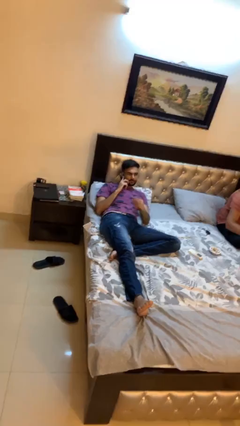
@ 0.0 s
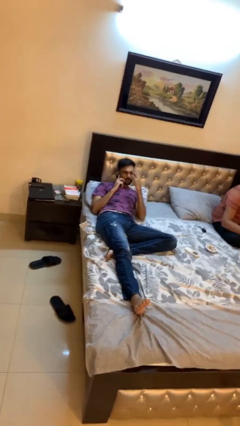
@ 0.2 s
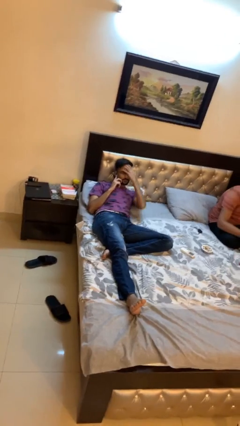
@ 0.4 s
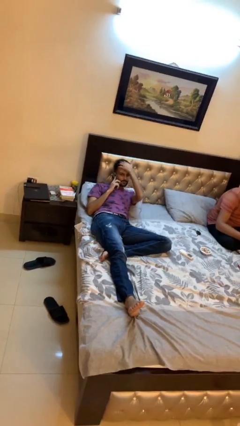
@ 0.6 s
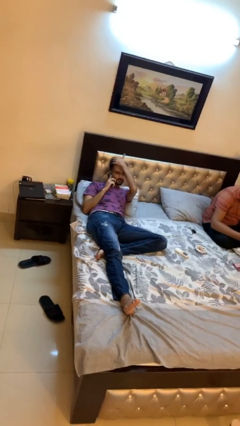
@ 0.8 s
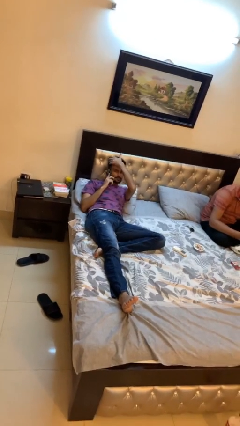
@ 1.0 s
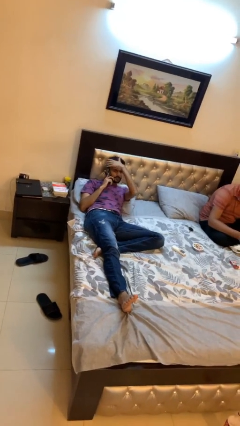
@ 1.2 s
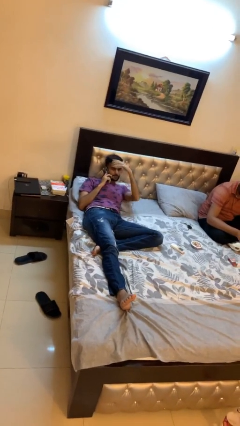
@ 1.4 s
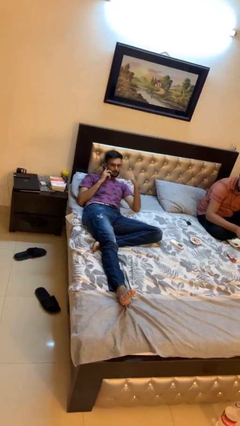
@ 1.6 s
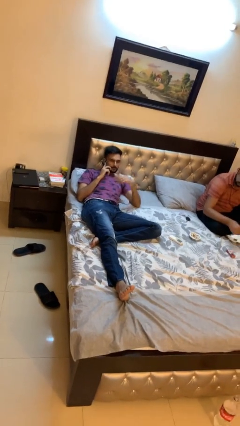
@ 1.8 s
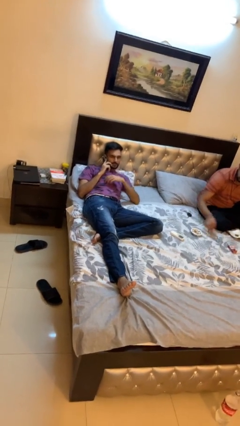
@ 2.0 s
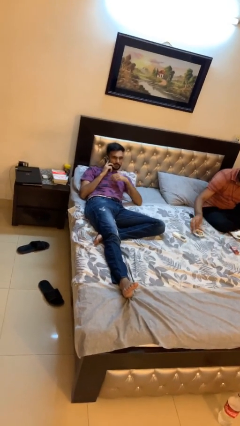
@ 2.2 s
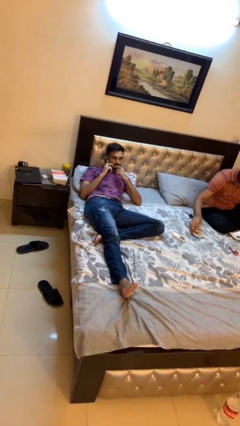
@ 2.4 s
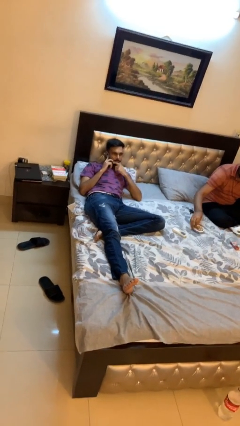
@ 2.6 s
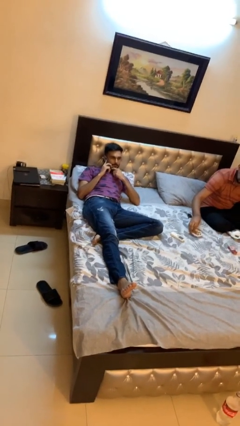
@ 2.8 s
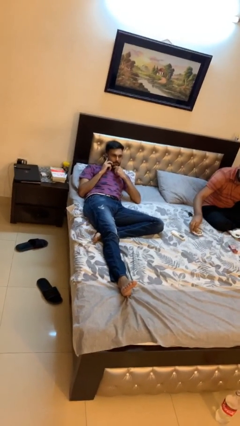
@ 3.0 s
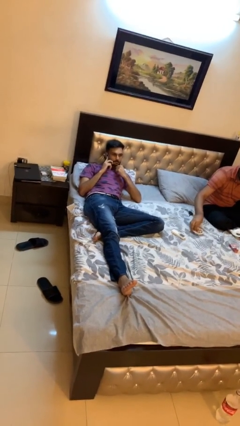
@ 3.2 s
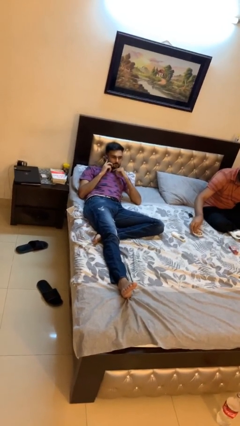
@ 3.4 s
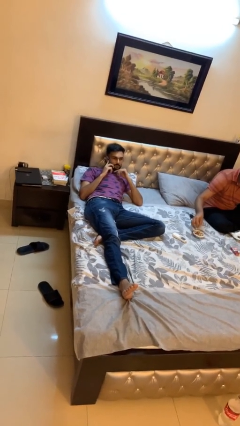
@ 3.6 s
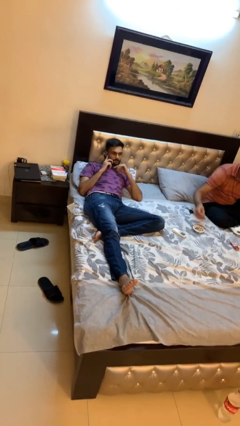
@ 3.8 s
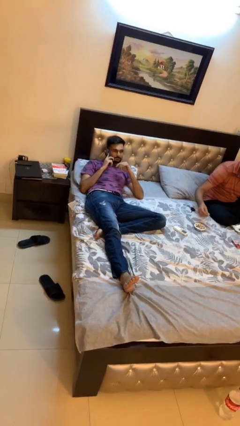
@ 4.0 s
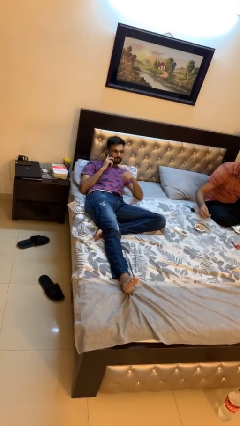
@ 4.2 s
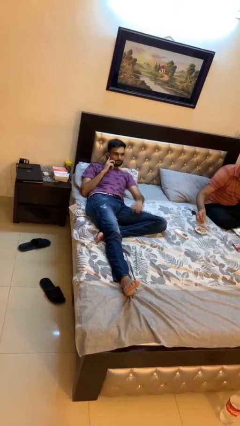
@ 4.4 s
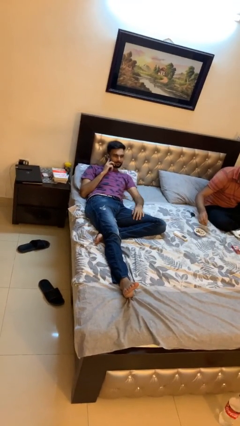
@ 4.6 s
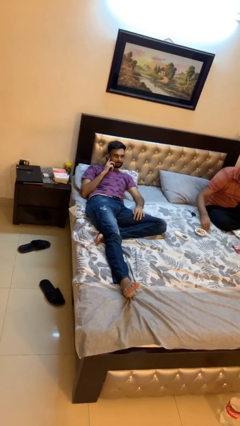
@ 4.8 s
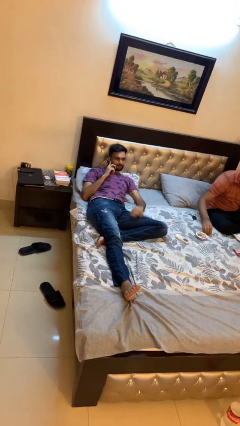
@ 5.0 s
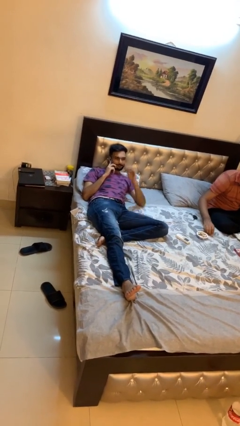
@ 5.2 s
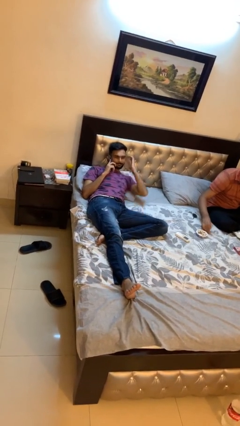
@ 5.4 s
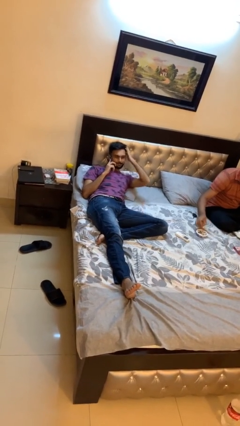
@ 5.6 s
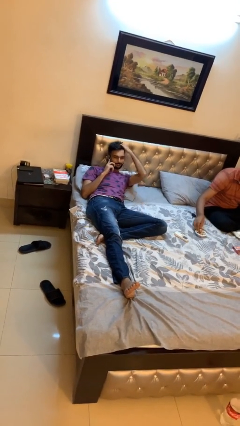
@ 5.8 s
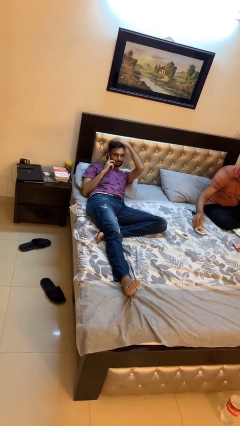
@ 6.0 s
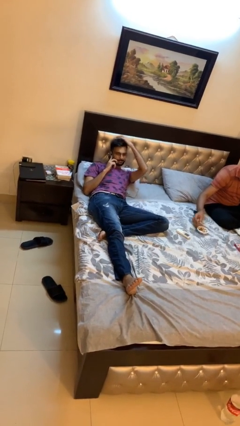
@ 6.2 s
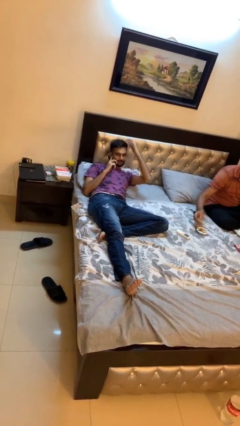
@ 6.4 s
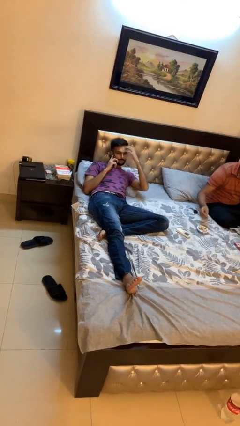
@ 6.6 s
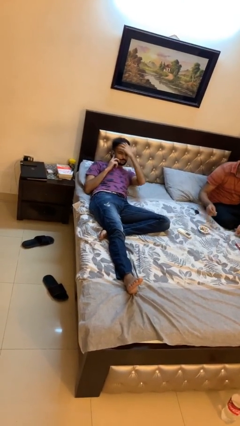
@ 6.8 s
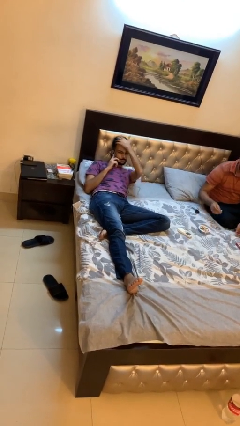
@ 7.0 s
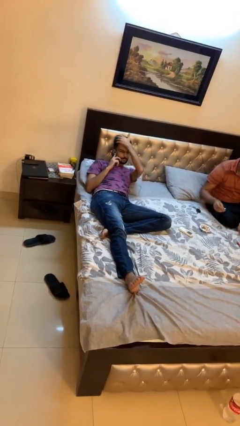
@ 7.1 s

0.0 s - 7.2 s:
person talks on phone

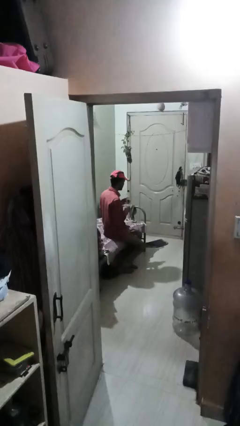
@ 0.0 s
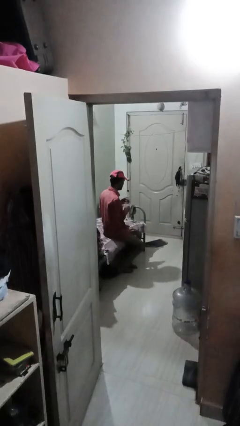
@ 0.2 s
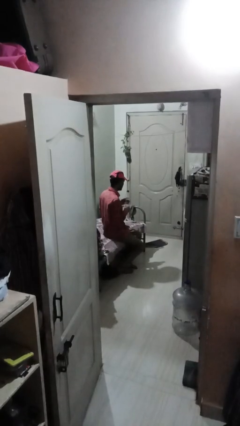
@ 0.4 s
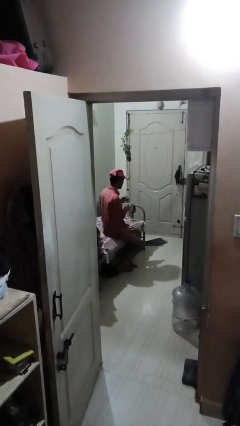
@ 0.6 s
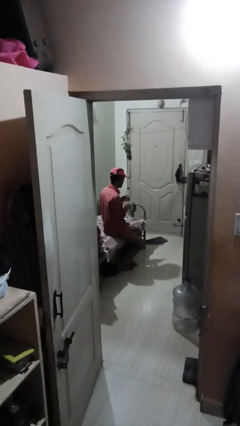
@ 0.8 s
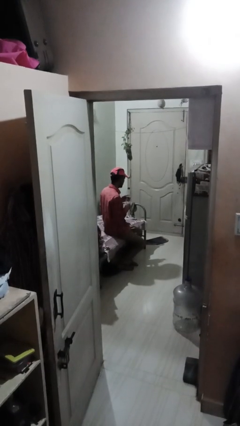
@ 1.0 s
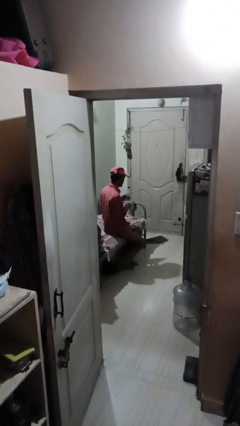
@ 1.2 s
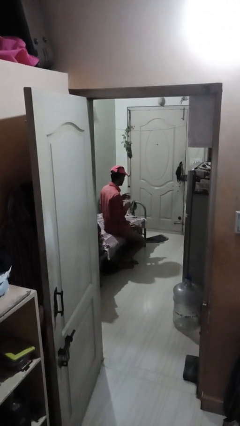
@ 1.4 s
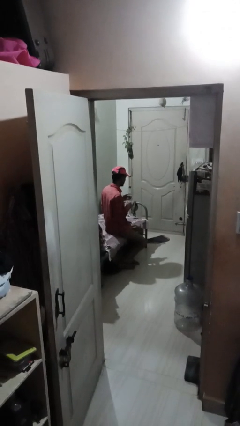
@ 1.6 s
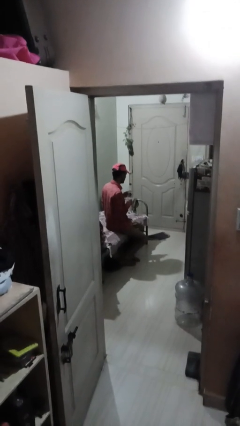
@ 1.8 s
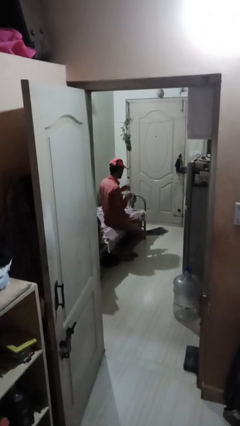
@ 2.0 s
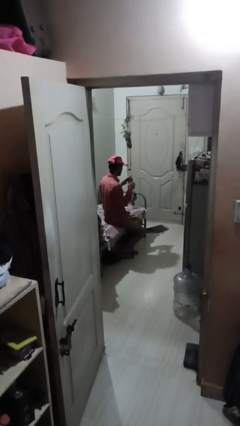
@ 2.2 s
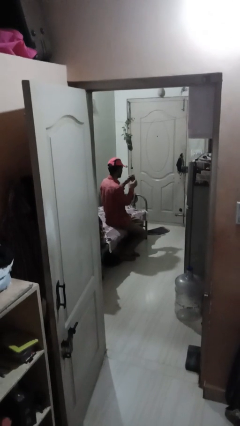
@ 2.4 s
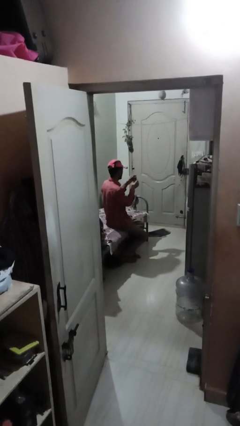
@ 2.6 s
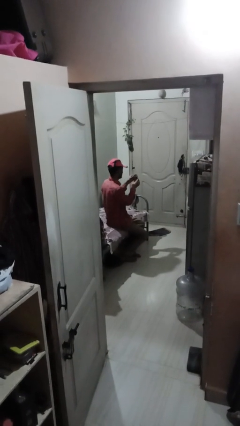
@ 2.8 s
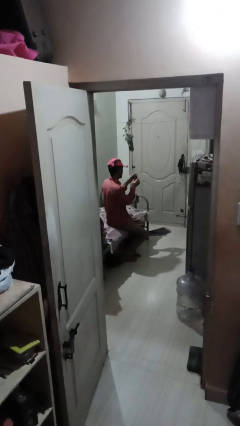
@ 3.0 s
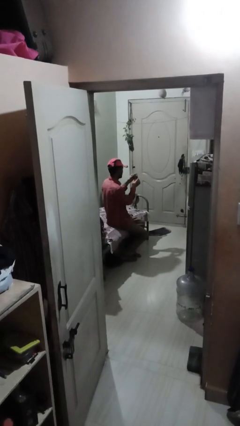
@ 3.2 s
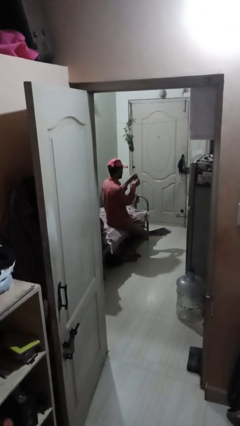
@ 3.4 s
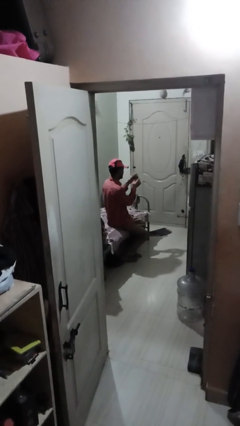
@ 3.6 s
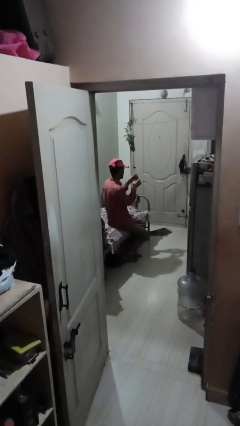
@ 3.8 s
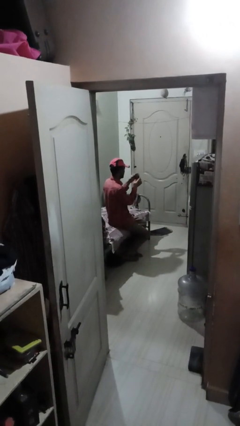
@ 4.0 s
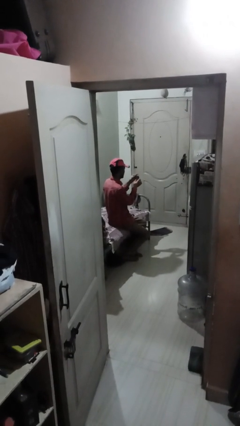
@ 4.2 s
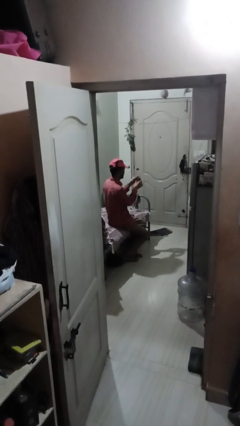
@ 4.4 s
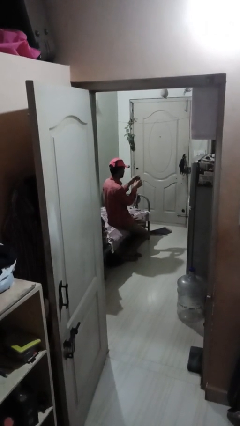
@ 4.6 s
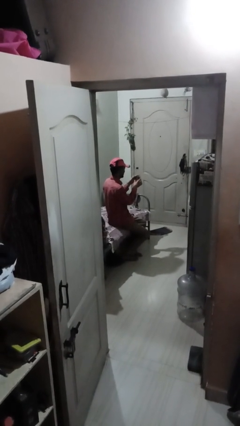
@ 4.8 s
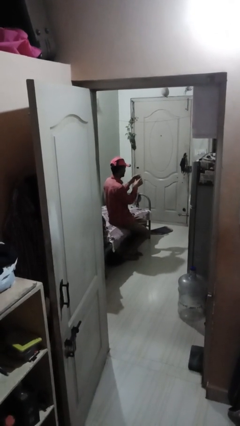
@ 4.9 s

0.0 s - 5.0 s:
person squeezes object

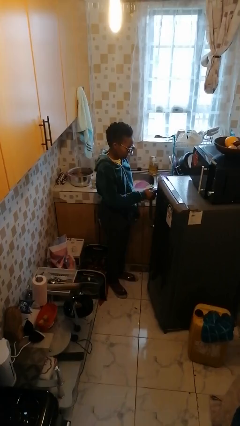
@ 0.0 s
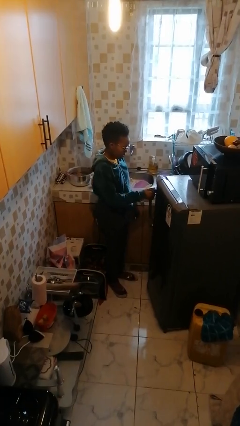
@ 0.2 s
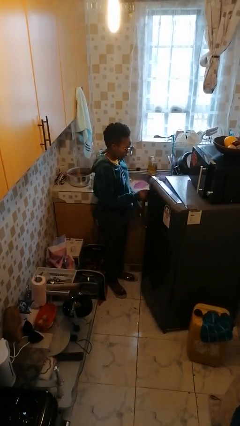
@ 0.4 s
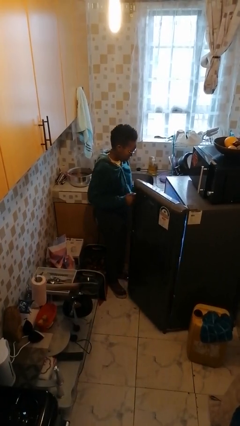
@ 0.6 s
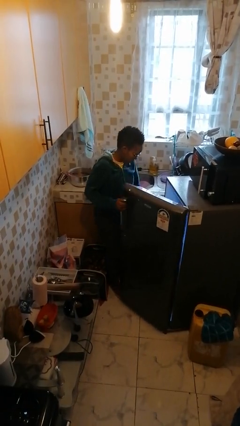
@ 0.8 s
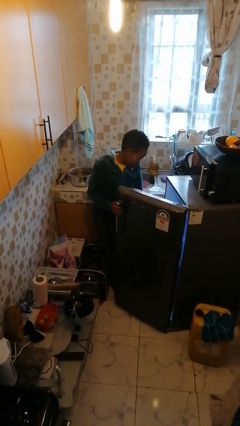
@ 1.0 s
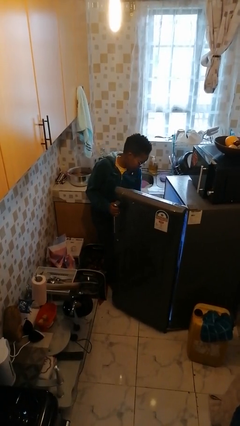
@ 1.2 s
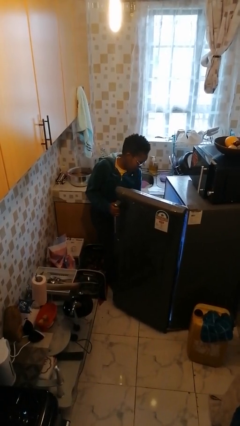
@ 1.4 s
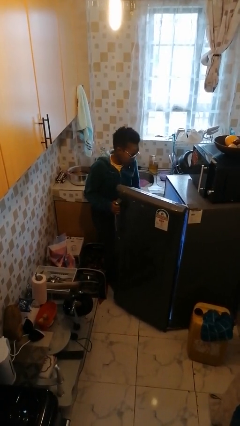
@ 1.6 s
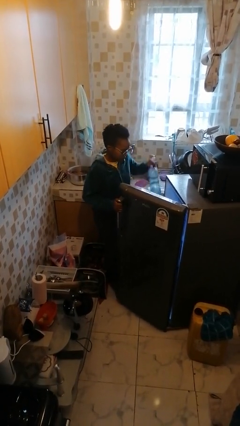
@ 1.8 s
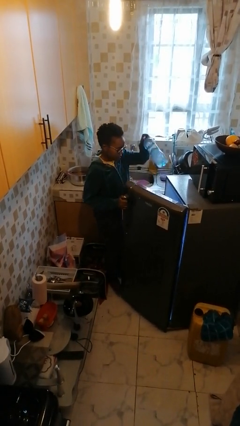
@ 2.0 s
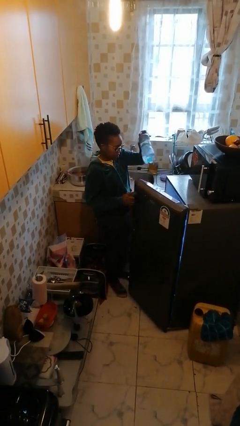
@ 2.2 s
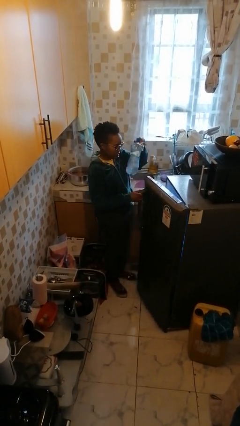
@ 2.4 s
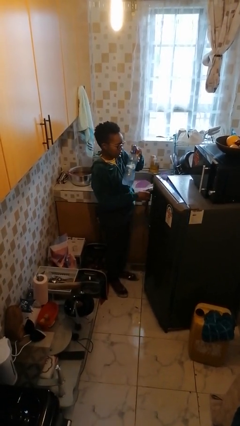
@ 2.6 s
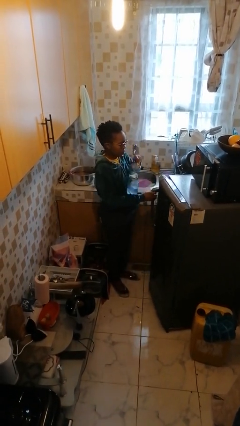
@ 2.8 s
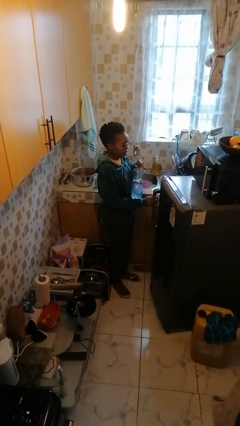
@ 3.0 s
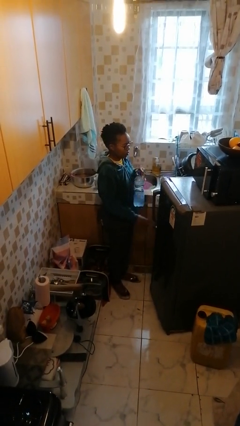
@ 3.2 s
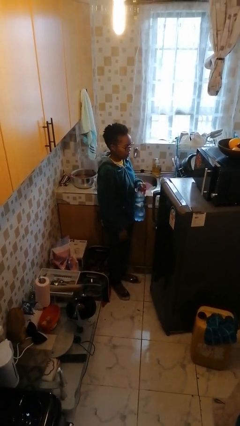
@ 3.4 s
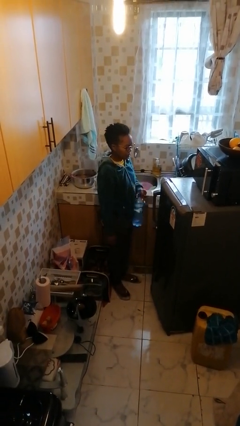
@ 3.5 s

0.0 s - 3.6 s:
person takes object from refrigerator

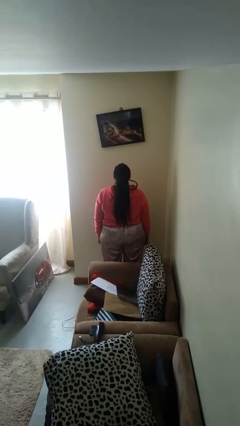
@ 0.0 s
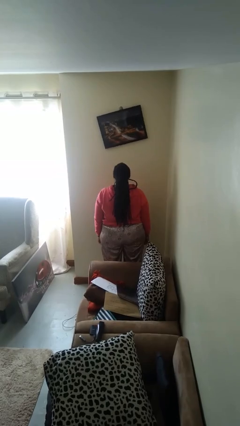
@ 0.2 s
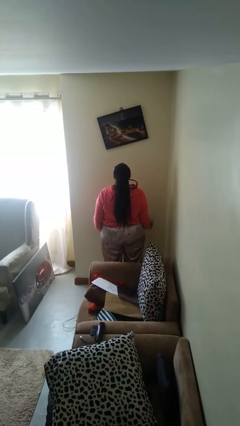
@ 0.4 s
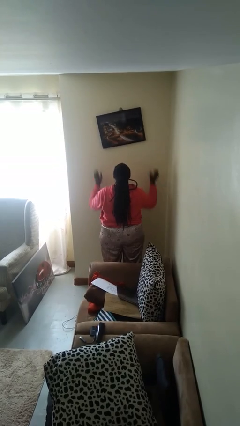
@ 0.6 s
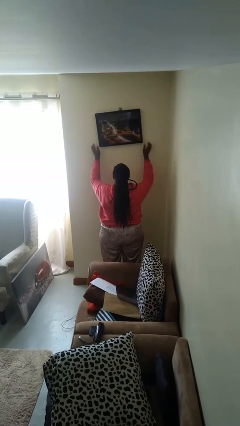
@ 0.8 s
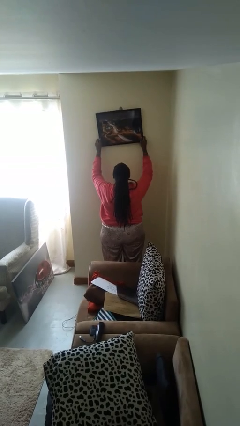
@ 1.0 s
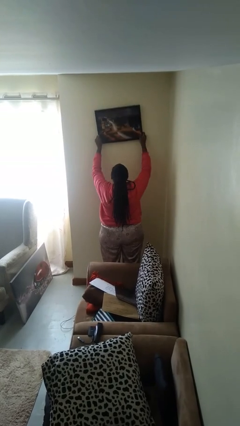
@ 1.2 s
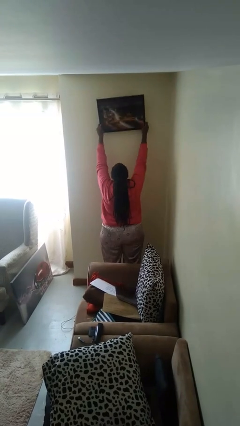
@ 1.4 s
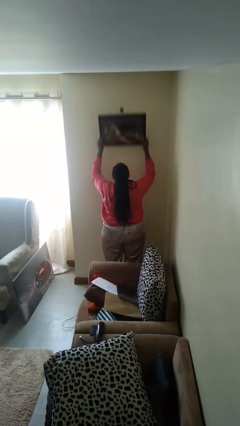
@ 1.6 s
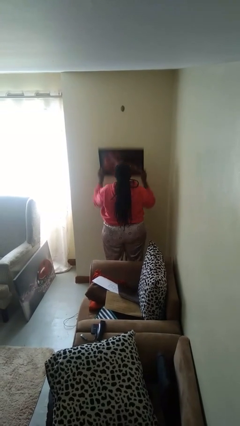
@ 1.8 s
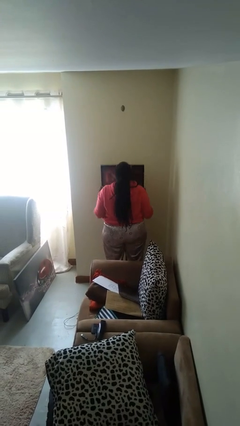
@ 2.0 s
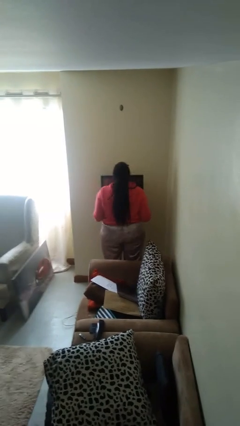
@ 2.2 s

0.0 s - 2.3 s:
person takes down picture frame
